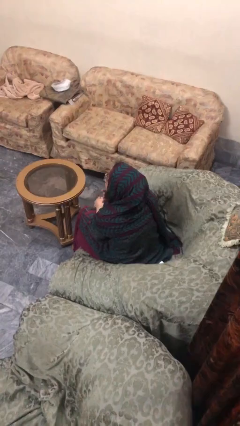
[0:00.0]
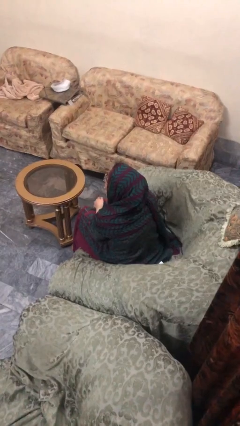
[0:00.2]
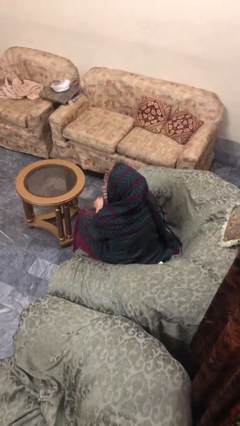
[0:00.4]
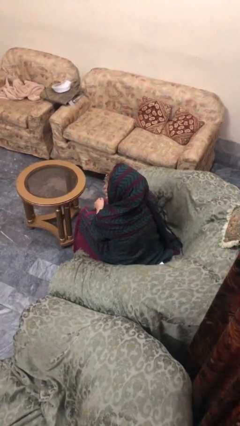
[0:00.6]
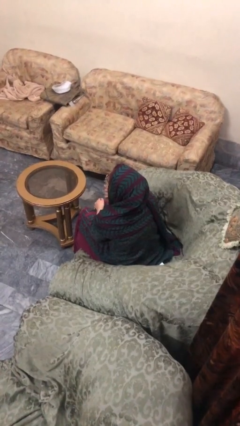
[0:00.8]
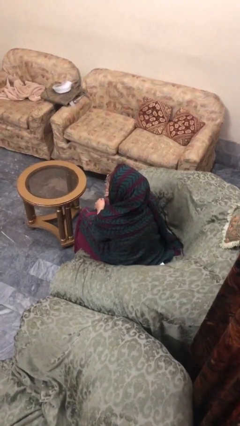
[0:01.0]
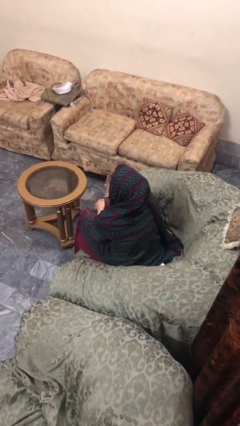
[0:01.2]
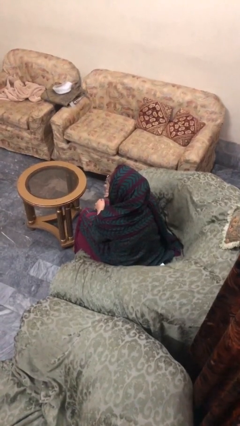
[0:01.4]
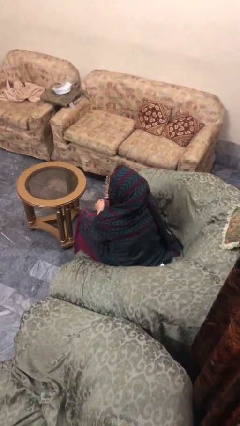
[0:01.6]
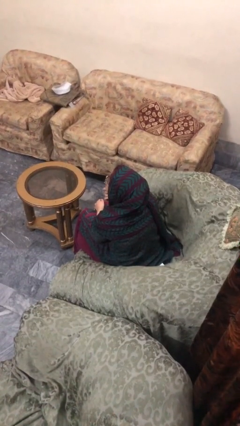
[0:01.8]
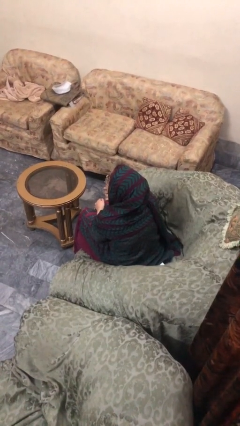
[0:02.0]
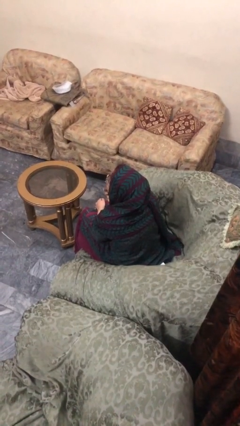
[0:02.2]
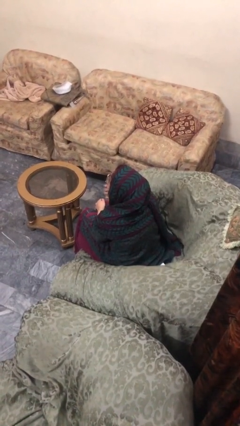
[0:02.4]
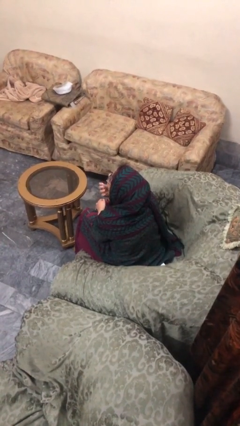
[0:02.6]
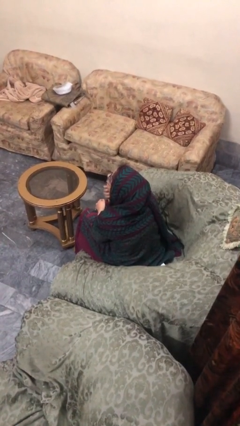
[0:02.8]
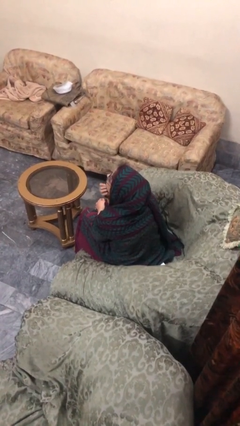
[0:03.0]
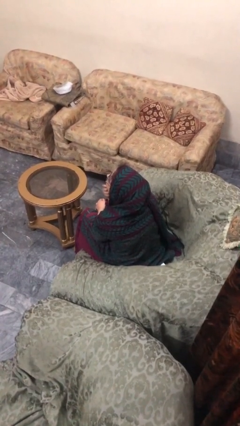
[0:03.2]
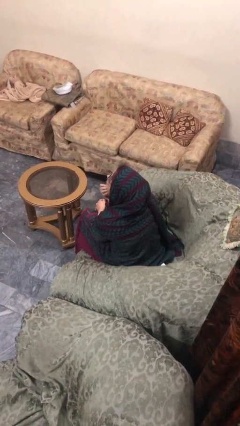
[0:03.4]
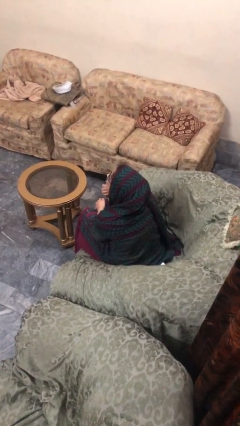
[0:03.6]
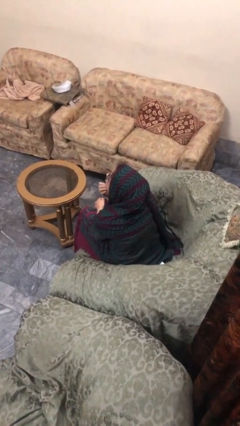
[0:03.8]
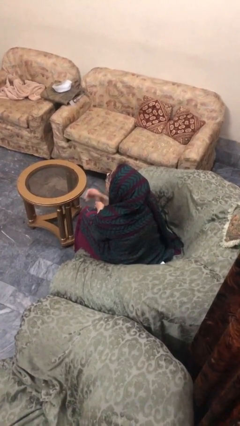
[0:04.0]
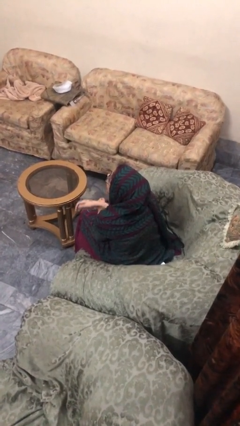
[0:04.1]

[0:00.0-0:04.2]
person strokes chin

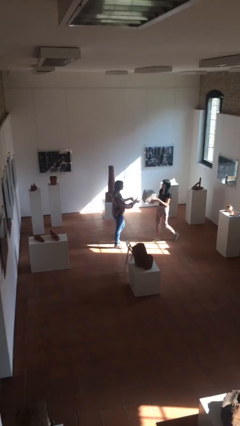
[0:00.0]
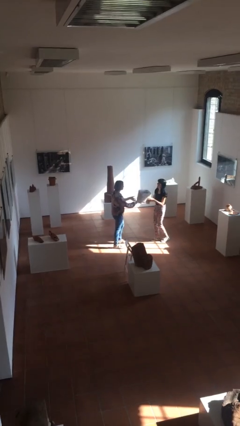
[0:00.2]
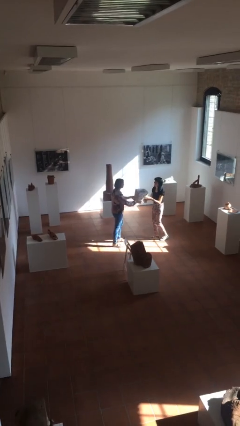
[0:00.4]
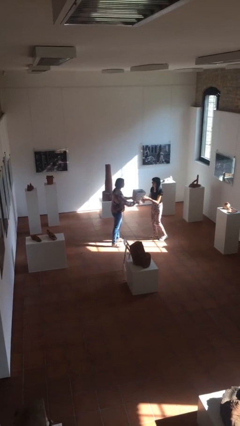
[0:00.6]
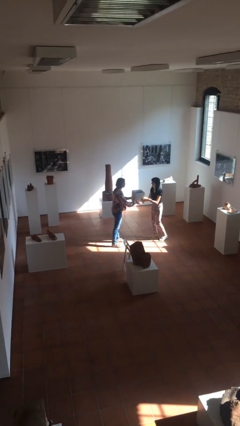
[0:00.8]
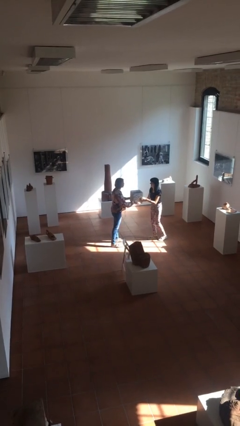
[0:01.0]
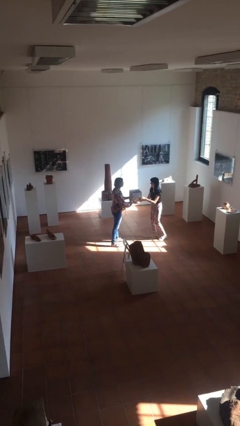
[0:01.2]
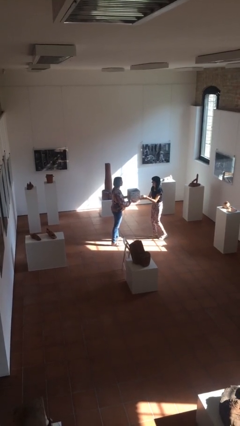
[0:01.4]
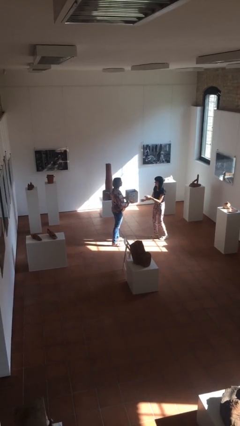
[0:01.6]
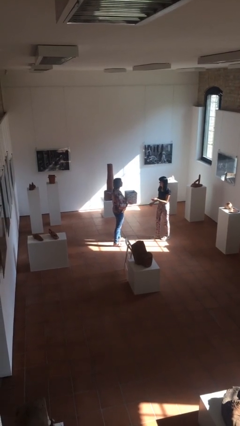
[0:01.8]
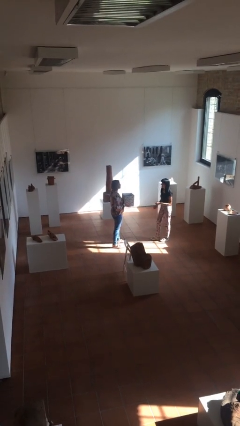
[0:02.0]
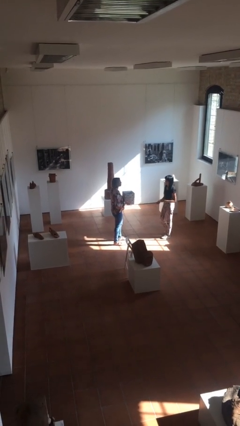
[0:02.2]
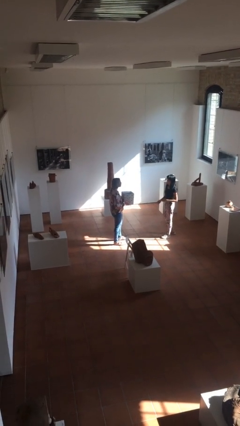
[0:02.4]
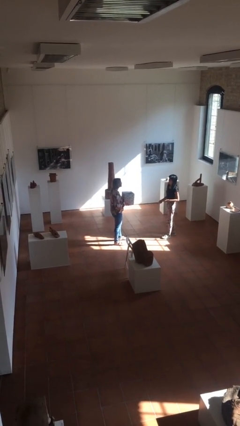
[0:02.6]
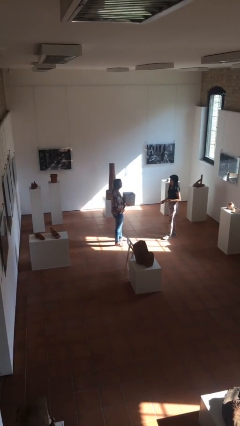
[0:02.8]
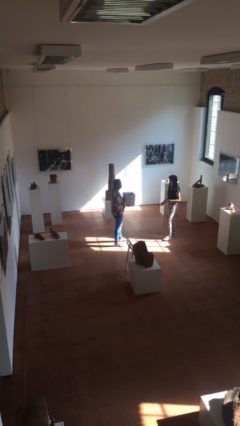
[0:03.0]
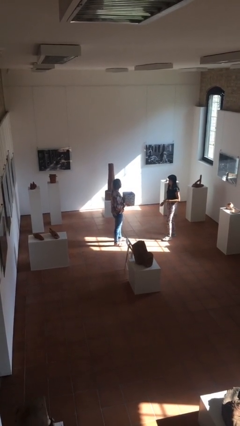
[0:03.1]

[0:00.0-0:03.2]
person transfers object to person

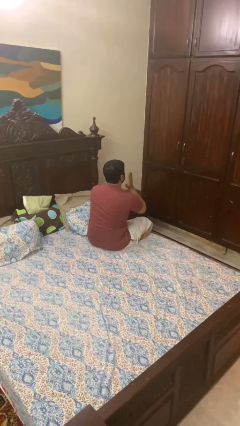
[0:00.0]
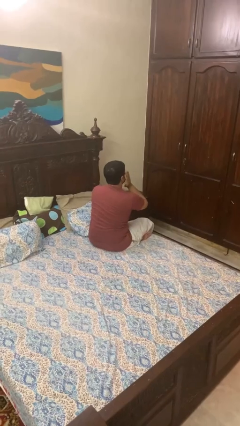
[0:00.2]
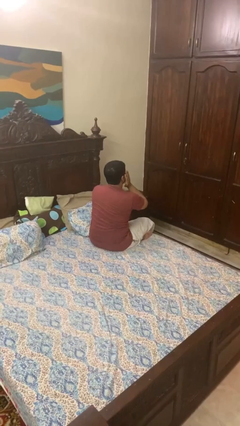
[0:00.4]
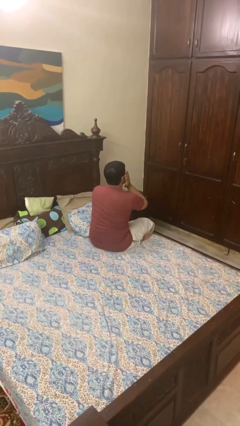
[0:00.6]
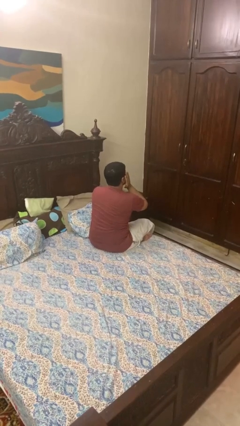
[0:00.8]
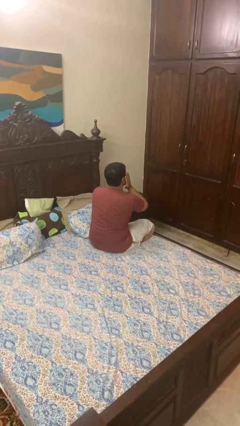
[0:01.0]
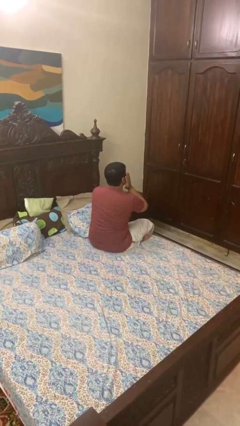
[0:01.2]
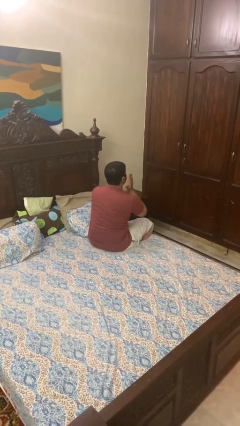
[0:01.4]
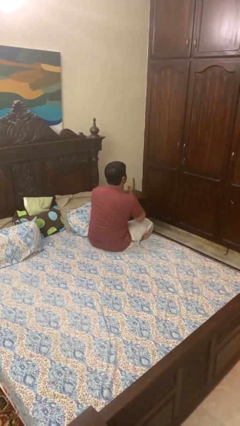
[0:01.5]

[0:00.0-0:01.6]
person covers face with hands

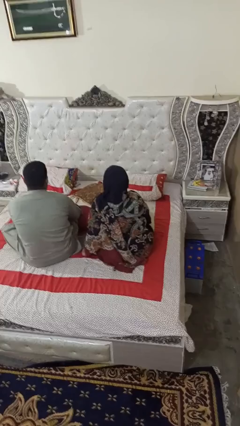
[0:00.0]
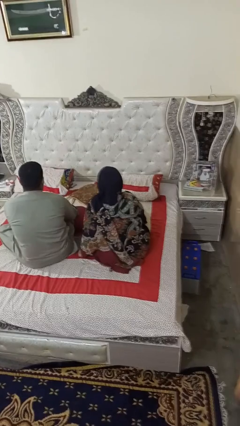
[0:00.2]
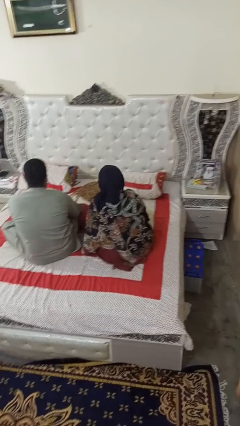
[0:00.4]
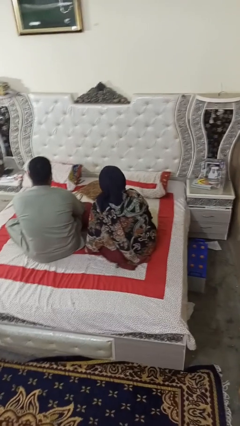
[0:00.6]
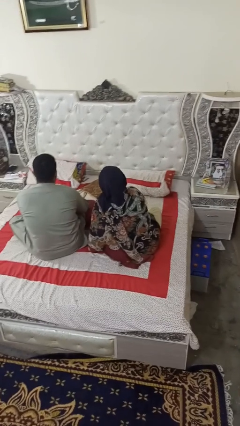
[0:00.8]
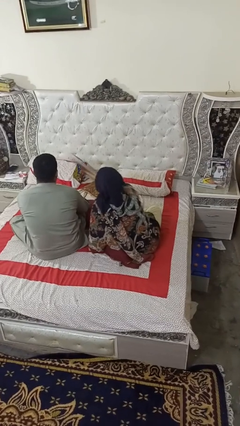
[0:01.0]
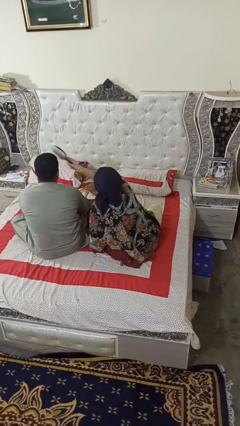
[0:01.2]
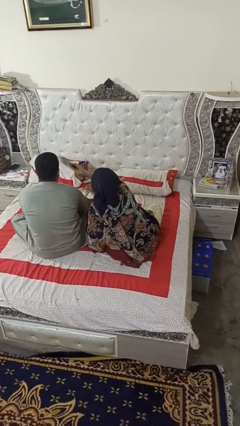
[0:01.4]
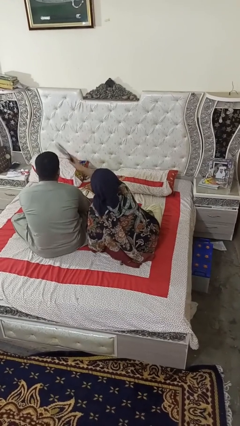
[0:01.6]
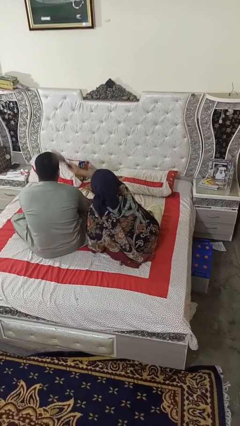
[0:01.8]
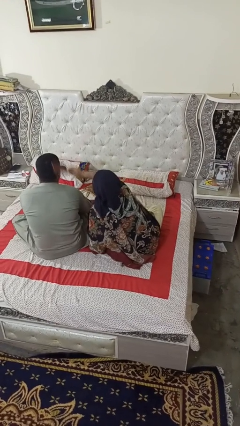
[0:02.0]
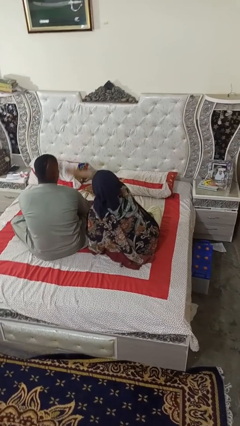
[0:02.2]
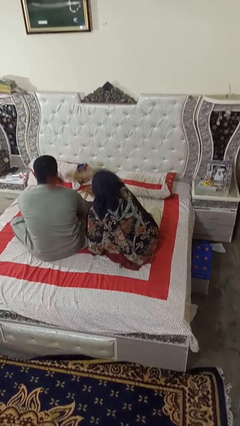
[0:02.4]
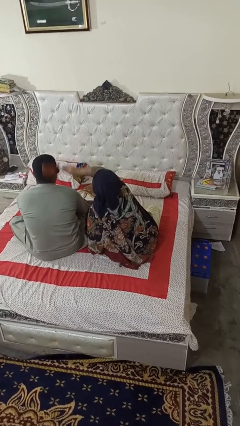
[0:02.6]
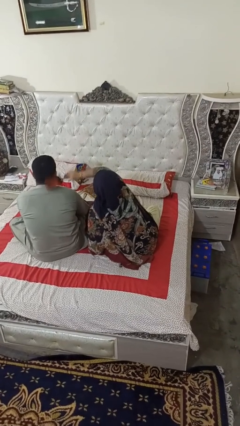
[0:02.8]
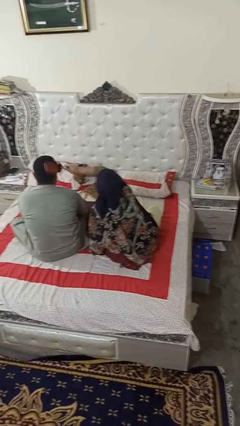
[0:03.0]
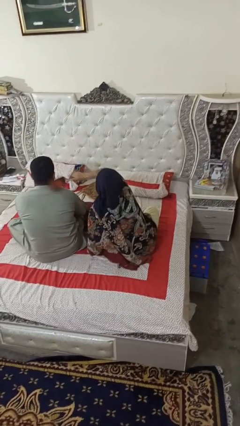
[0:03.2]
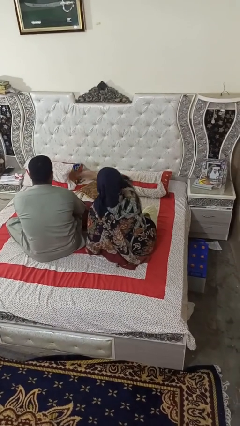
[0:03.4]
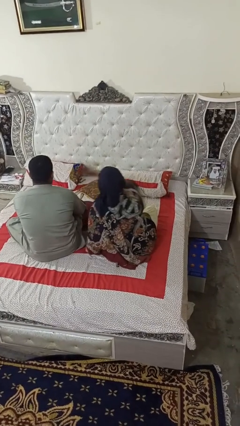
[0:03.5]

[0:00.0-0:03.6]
person brushes hair of person

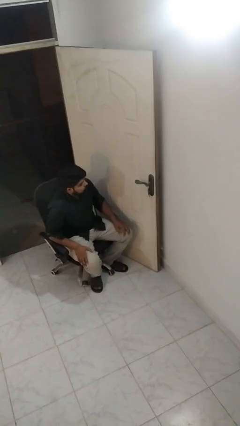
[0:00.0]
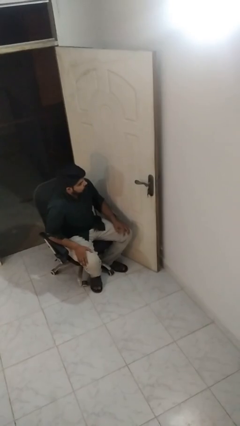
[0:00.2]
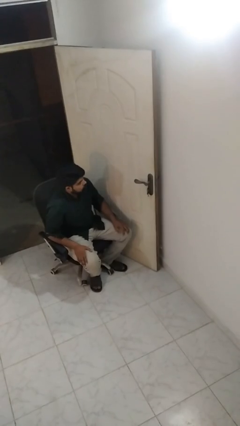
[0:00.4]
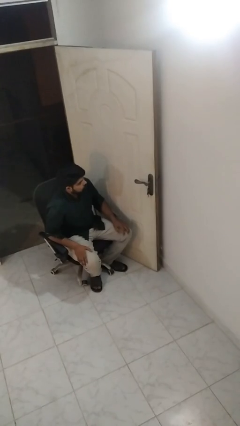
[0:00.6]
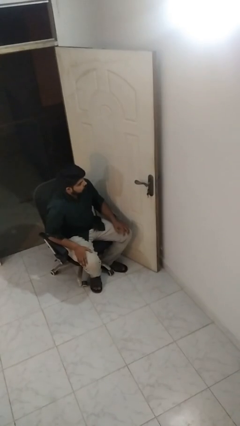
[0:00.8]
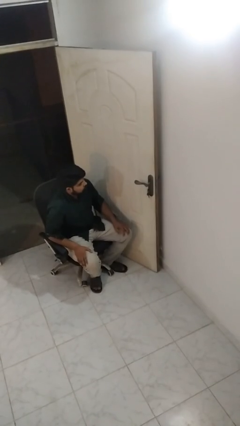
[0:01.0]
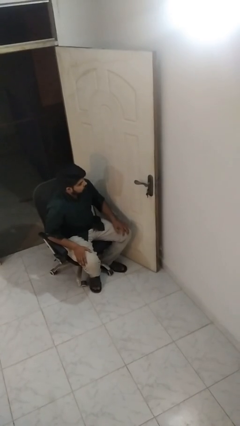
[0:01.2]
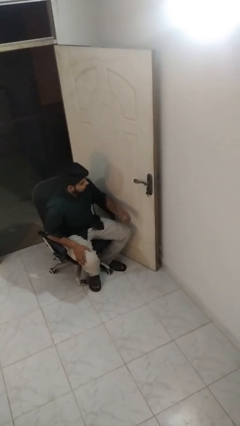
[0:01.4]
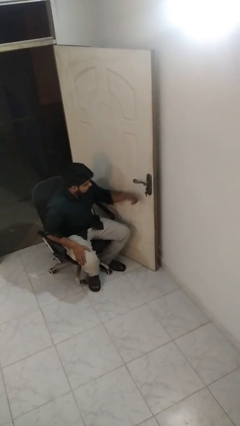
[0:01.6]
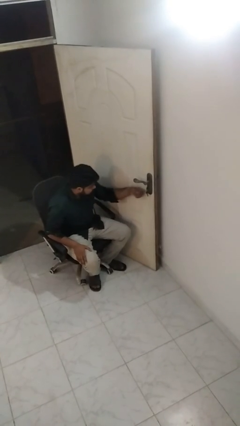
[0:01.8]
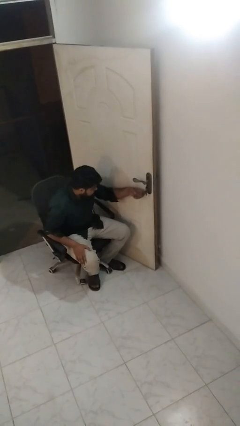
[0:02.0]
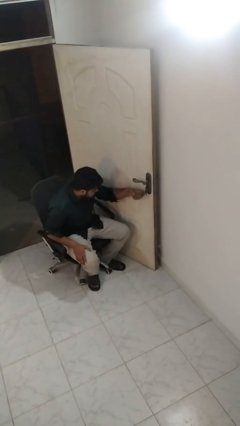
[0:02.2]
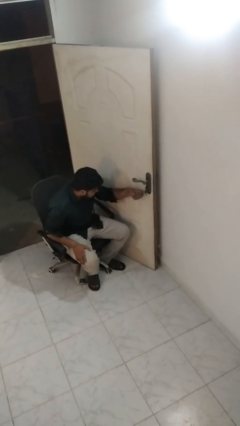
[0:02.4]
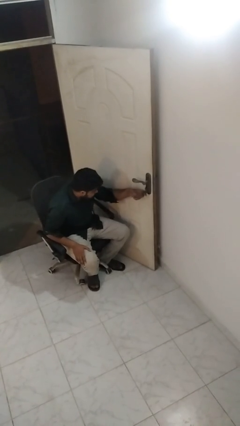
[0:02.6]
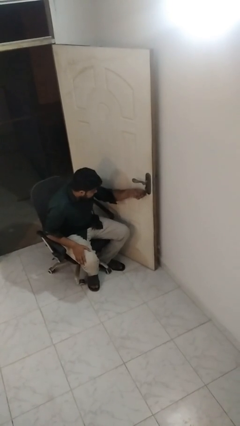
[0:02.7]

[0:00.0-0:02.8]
person taps object with finger

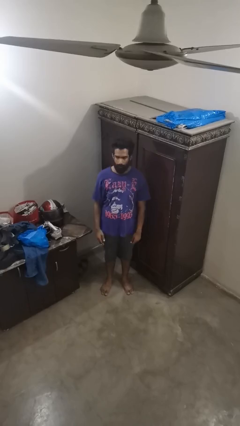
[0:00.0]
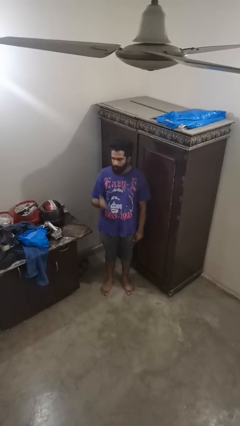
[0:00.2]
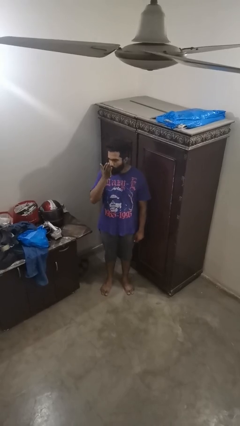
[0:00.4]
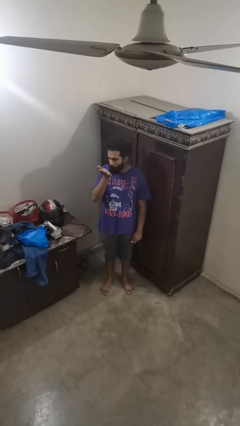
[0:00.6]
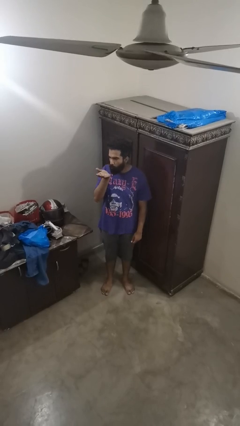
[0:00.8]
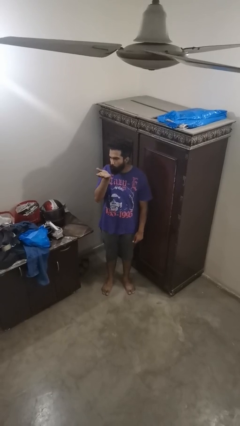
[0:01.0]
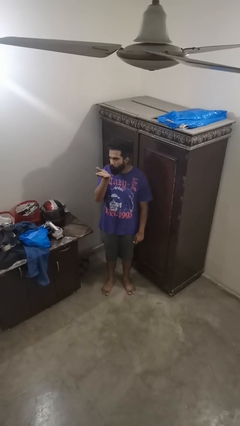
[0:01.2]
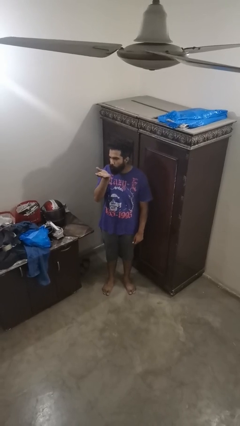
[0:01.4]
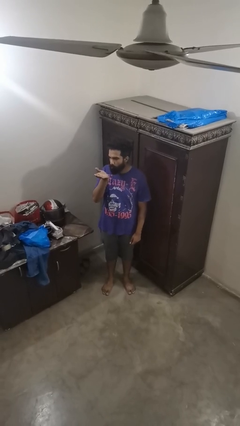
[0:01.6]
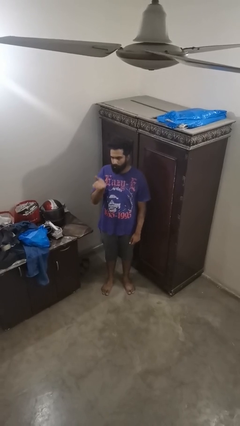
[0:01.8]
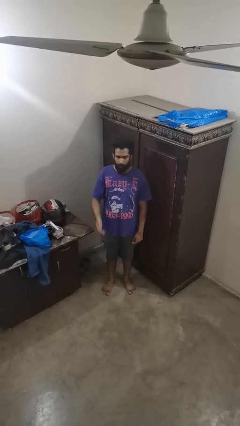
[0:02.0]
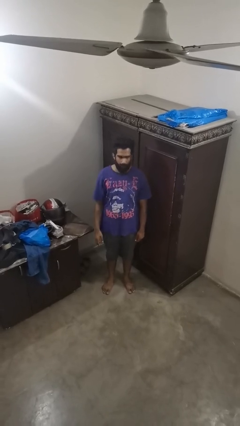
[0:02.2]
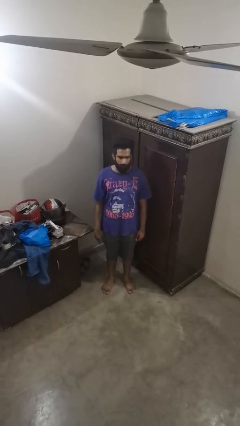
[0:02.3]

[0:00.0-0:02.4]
person gestures blow kiss
